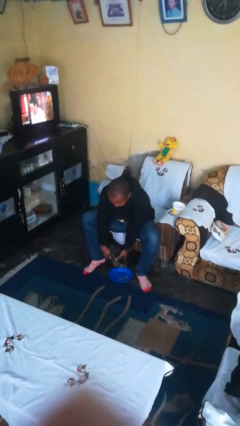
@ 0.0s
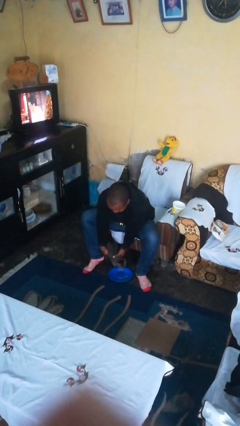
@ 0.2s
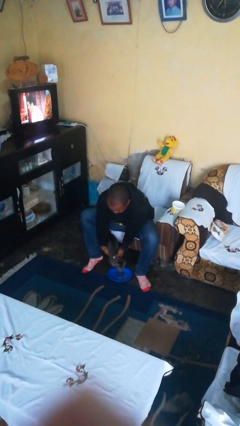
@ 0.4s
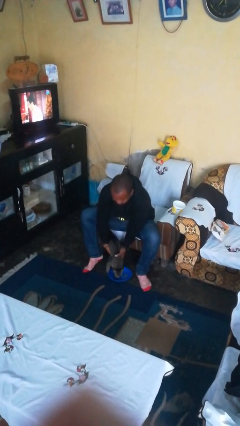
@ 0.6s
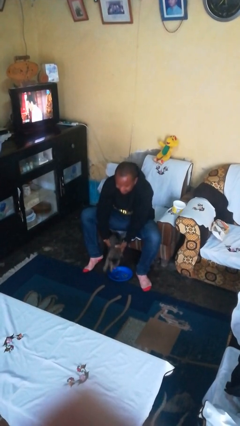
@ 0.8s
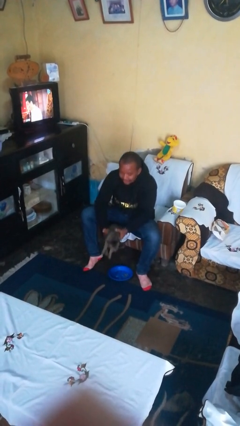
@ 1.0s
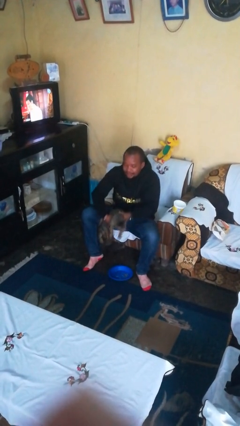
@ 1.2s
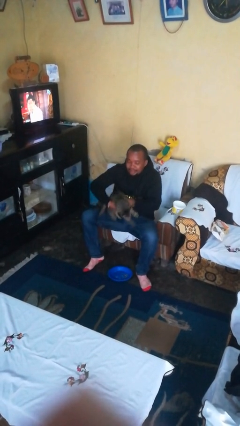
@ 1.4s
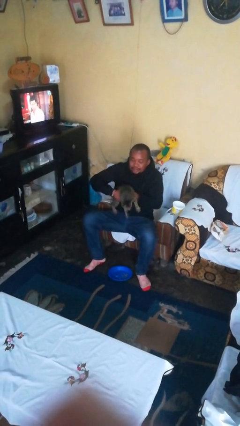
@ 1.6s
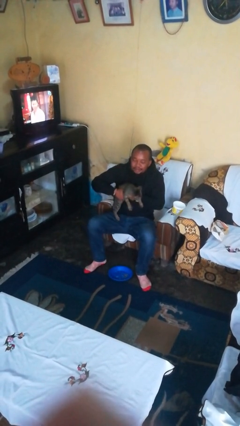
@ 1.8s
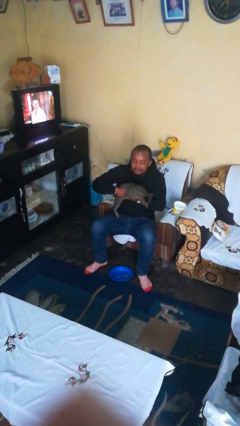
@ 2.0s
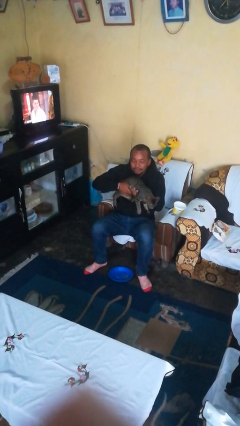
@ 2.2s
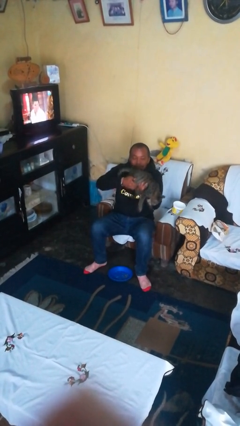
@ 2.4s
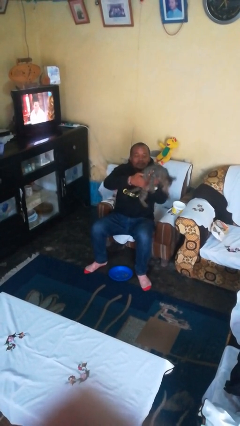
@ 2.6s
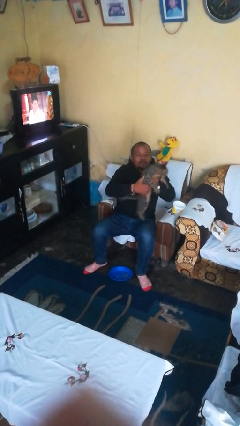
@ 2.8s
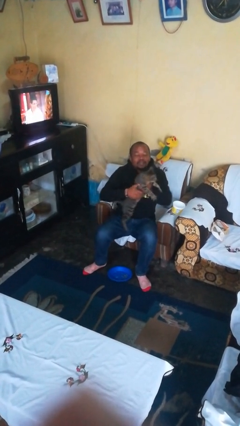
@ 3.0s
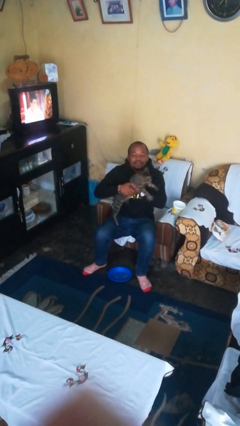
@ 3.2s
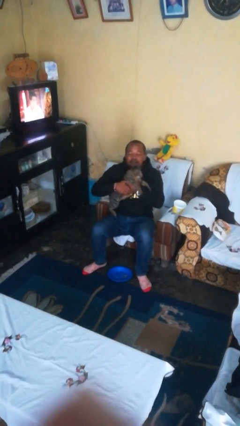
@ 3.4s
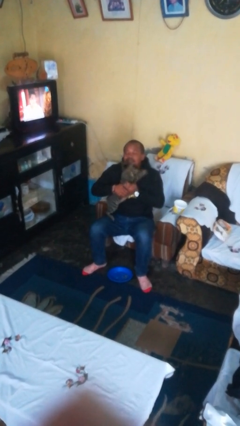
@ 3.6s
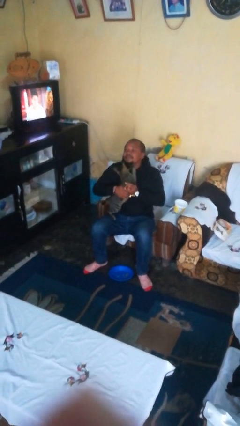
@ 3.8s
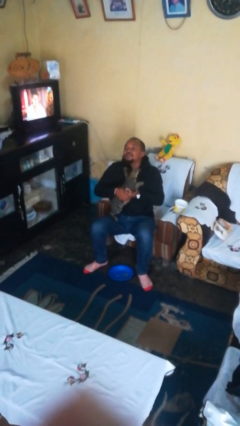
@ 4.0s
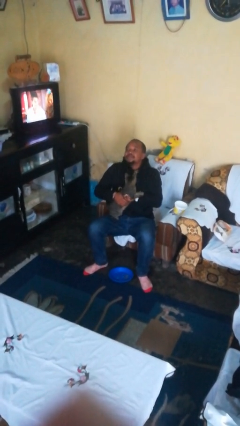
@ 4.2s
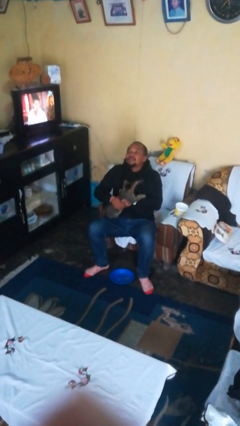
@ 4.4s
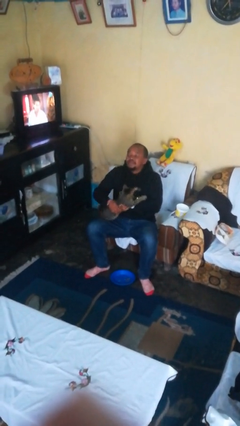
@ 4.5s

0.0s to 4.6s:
person hugs cat

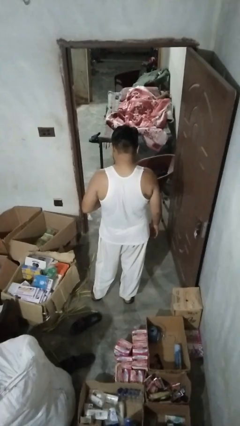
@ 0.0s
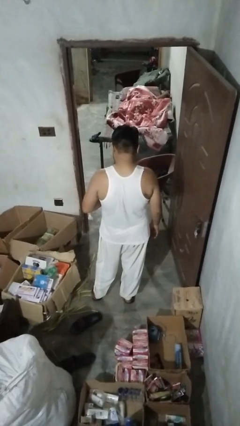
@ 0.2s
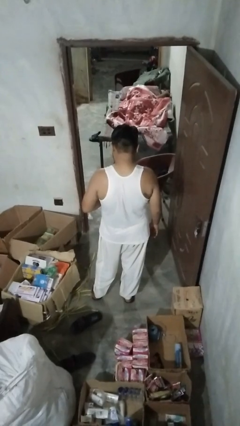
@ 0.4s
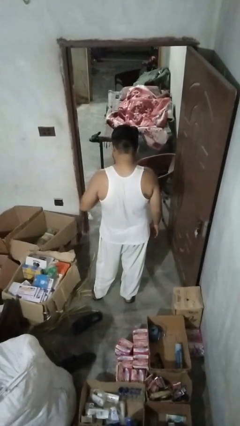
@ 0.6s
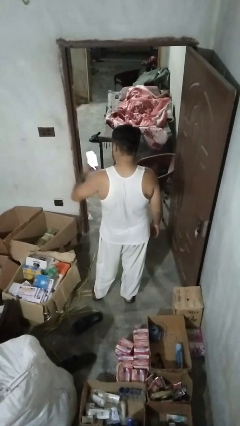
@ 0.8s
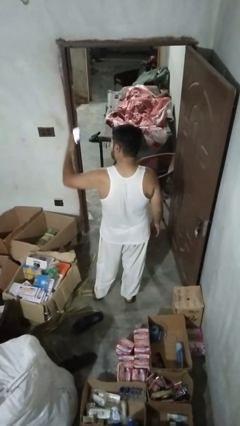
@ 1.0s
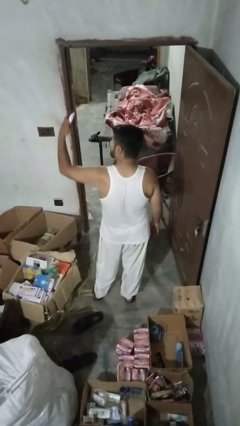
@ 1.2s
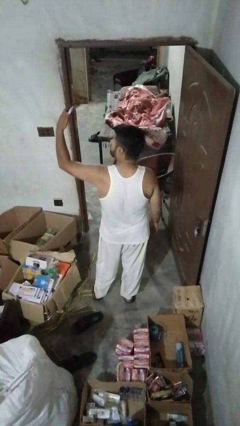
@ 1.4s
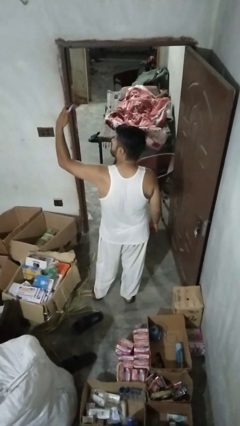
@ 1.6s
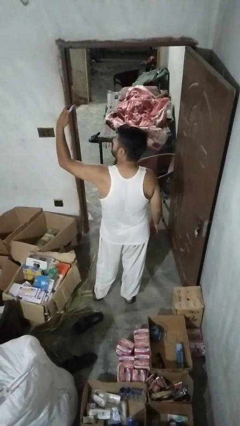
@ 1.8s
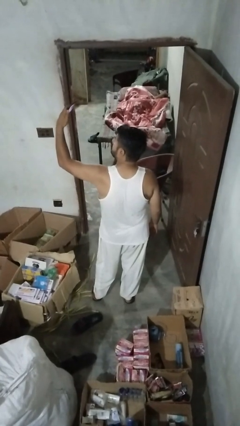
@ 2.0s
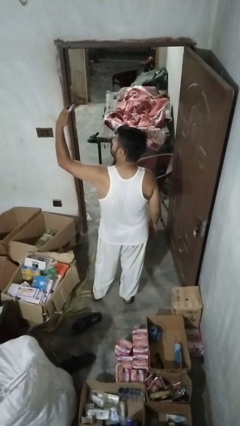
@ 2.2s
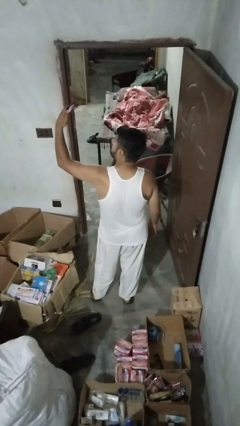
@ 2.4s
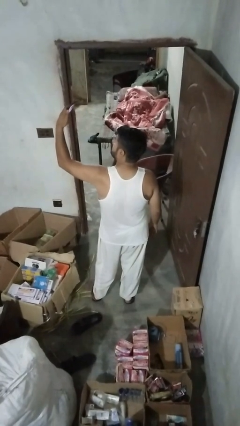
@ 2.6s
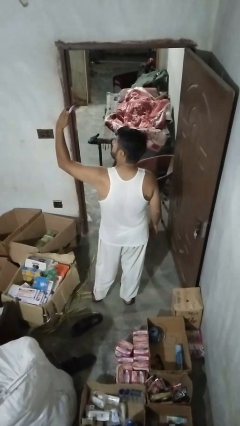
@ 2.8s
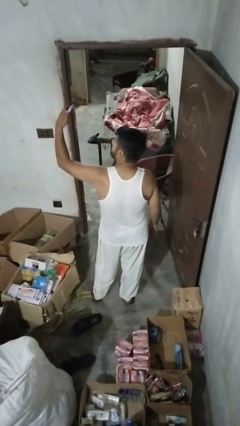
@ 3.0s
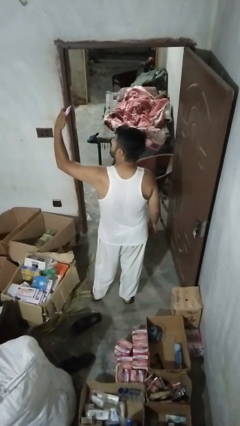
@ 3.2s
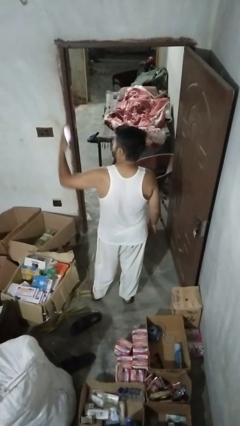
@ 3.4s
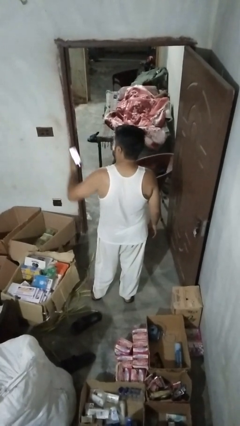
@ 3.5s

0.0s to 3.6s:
person takes selfie

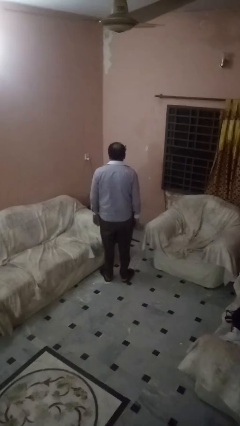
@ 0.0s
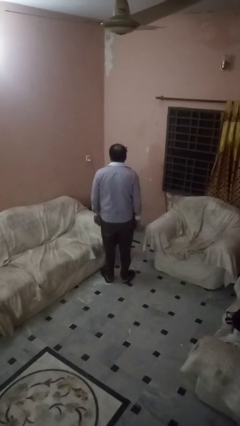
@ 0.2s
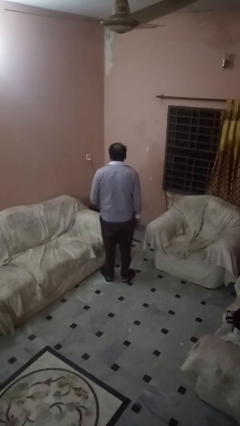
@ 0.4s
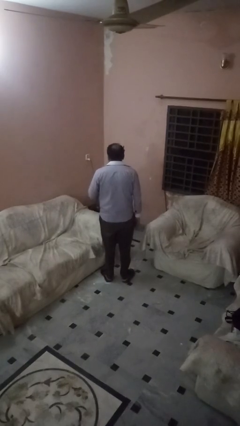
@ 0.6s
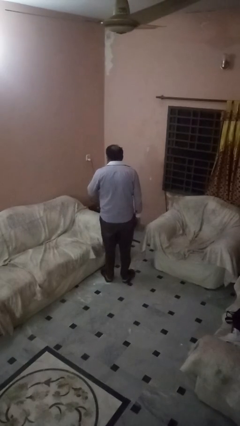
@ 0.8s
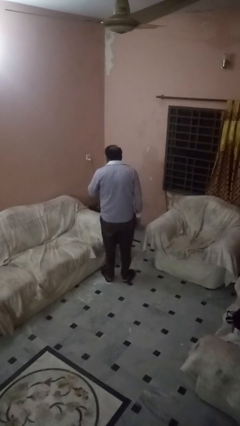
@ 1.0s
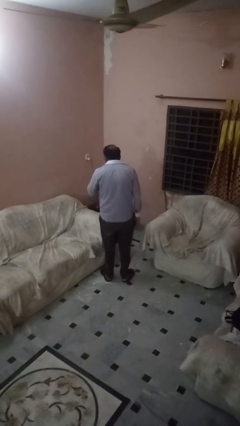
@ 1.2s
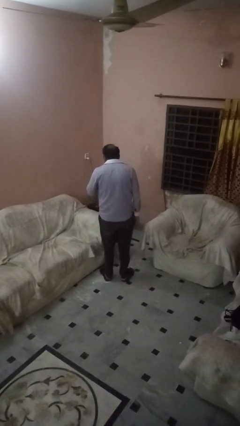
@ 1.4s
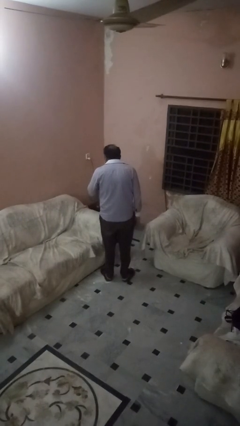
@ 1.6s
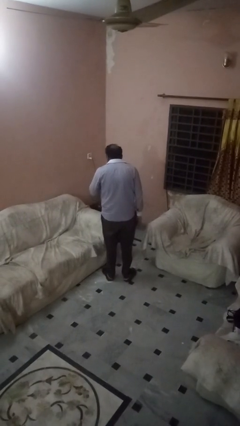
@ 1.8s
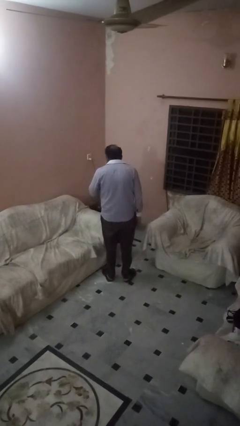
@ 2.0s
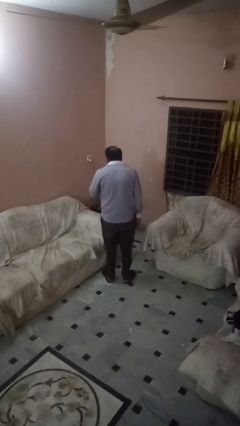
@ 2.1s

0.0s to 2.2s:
person gestures be quiet

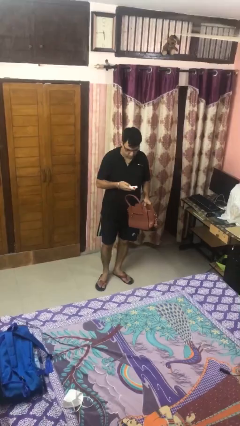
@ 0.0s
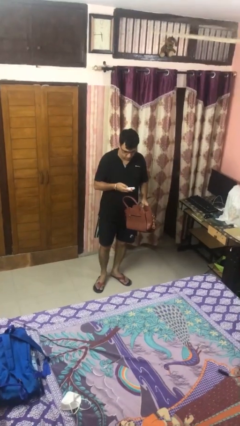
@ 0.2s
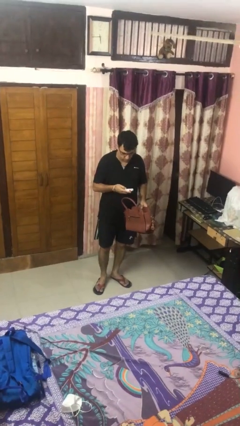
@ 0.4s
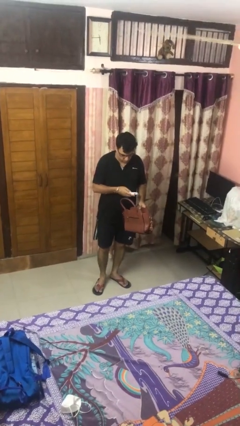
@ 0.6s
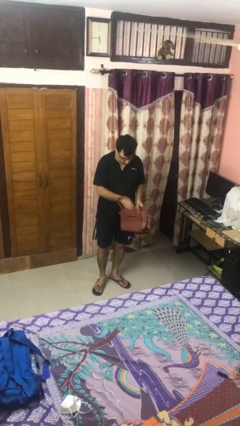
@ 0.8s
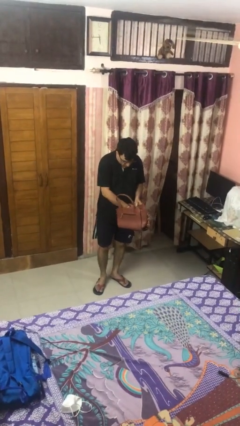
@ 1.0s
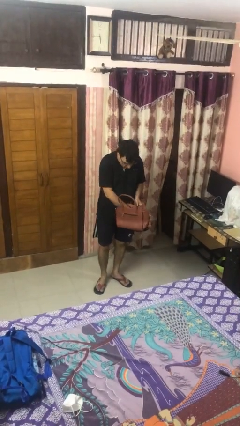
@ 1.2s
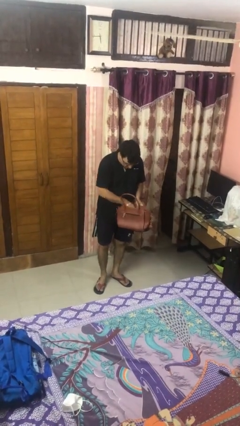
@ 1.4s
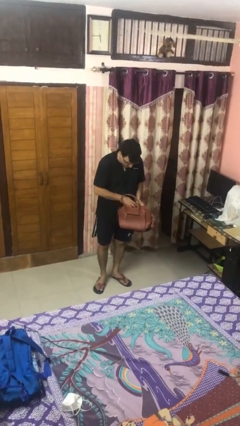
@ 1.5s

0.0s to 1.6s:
person puts object into purse

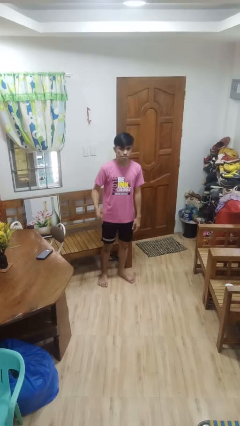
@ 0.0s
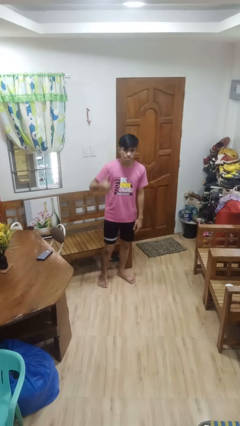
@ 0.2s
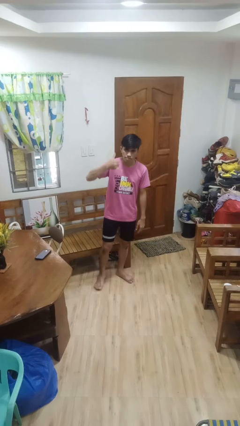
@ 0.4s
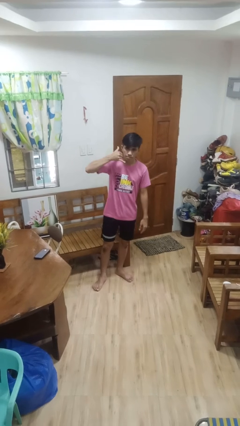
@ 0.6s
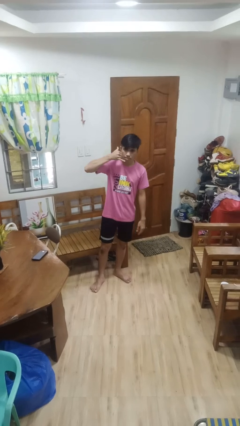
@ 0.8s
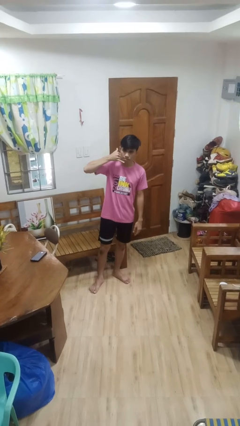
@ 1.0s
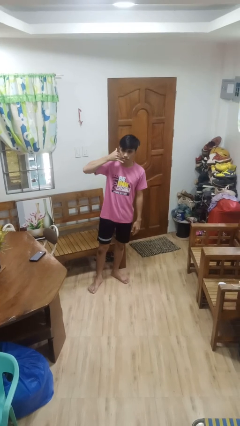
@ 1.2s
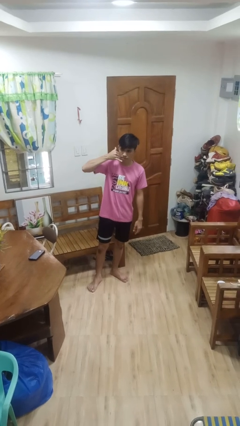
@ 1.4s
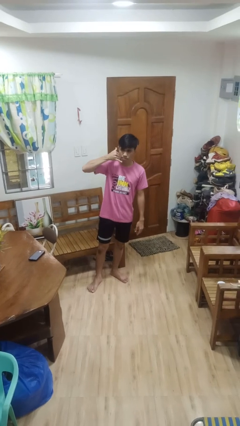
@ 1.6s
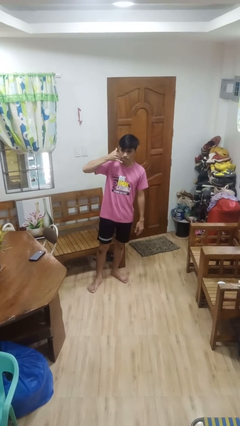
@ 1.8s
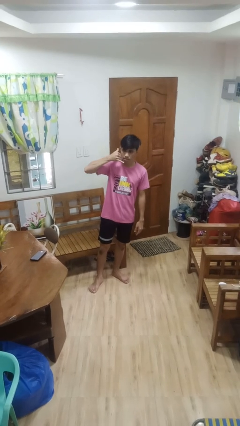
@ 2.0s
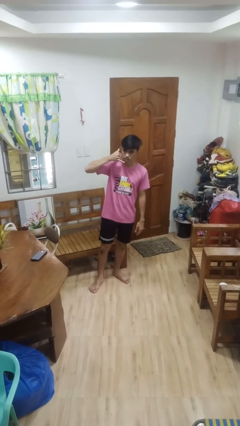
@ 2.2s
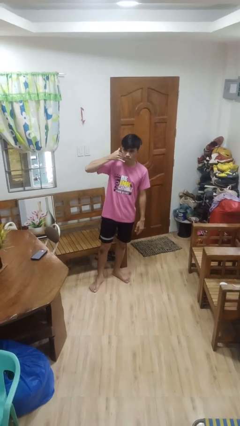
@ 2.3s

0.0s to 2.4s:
person gestures call me

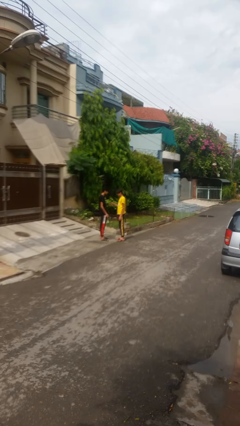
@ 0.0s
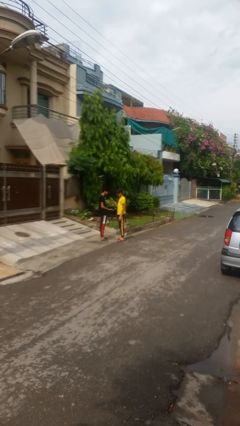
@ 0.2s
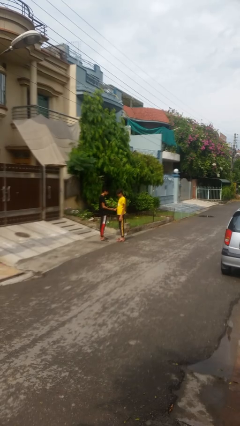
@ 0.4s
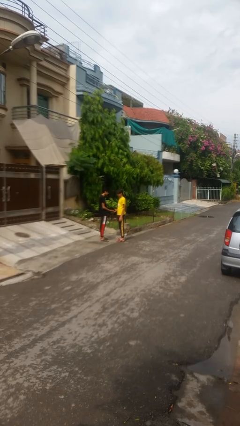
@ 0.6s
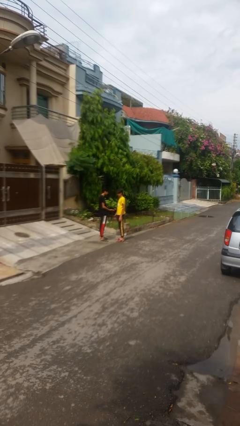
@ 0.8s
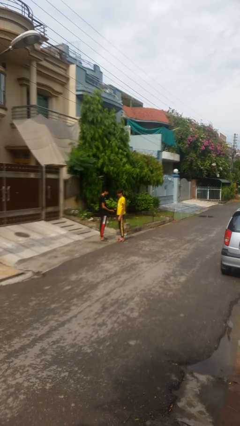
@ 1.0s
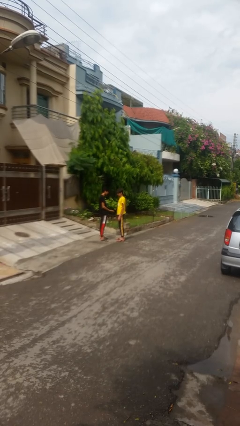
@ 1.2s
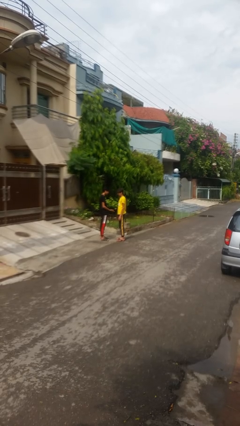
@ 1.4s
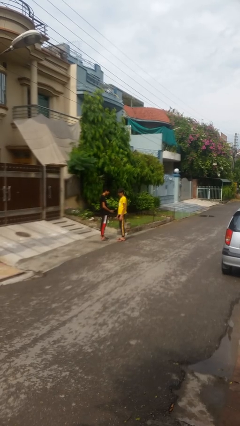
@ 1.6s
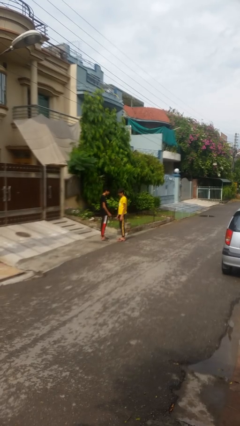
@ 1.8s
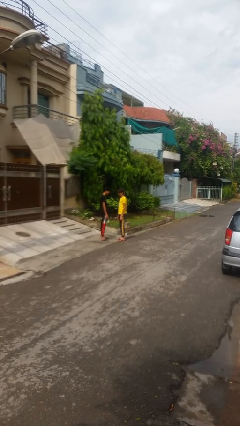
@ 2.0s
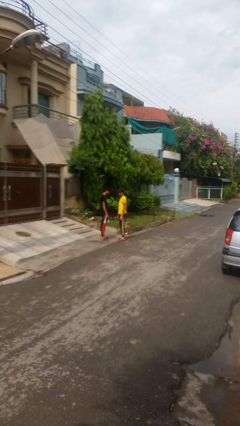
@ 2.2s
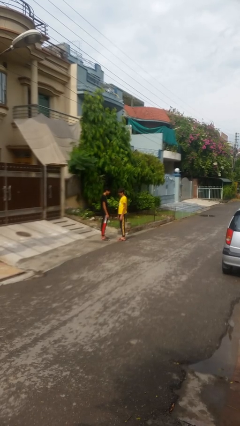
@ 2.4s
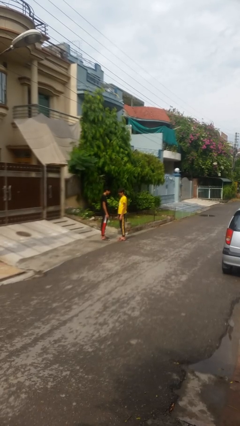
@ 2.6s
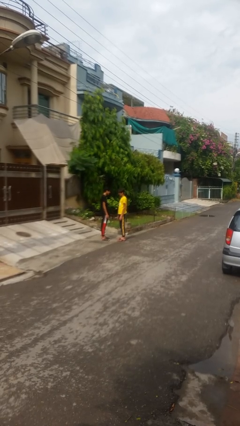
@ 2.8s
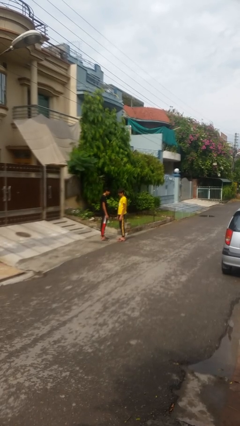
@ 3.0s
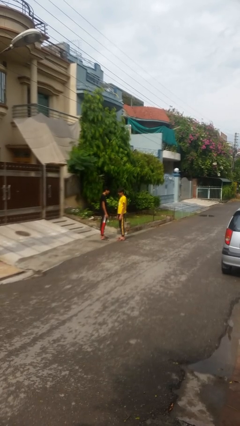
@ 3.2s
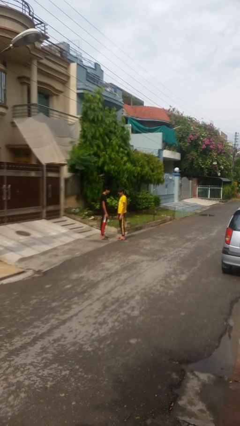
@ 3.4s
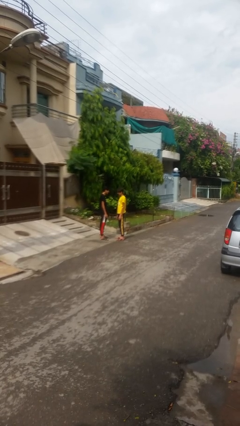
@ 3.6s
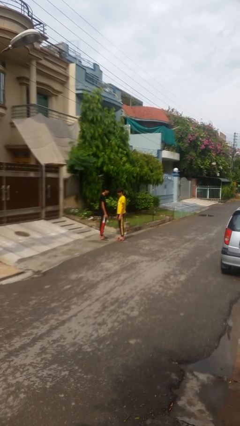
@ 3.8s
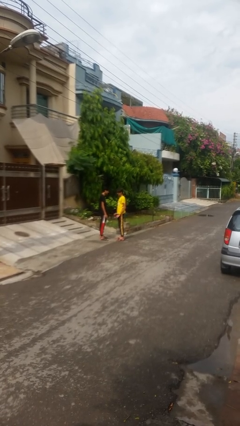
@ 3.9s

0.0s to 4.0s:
person highfives hand
